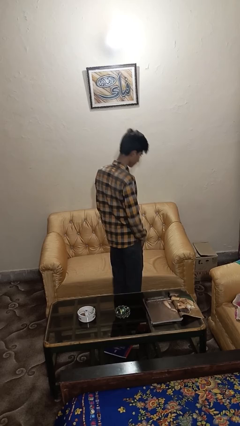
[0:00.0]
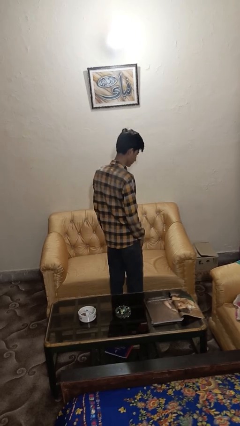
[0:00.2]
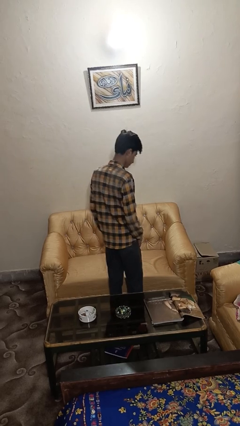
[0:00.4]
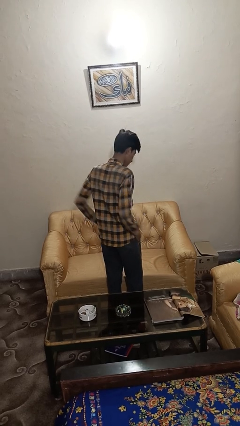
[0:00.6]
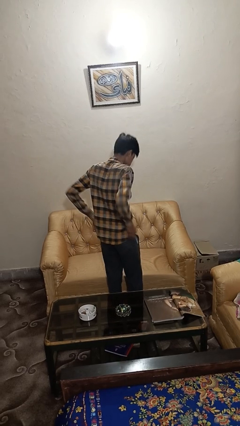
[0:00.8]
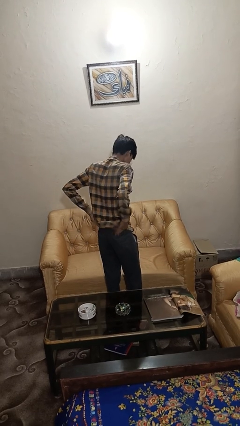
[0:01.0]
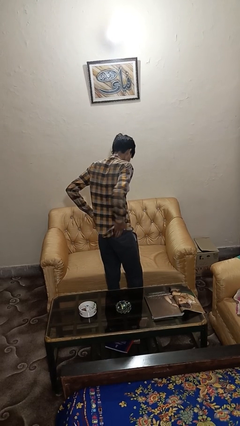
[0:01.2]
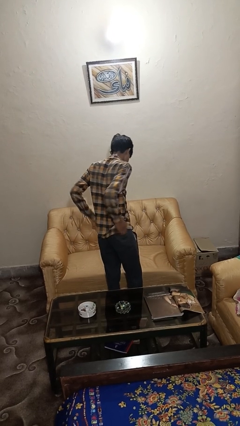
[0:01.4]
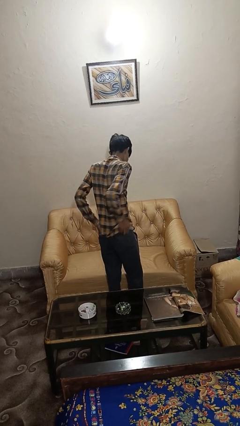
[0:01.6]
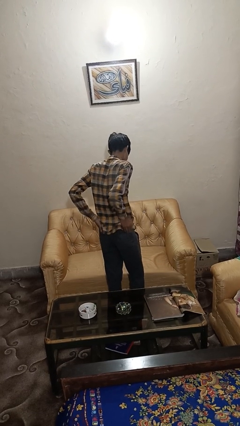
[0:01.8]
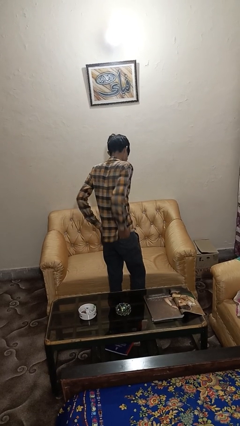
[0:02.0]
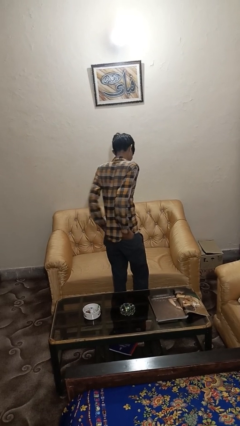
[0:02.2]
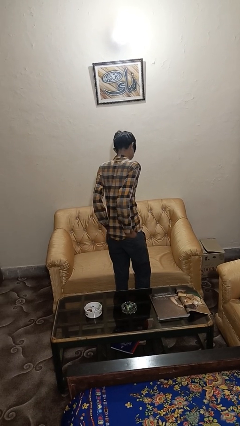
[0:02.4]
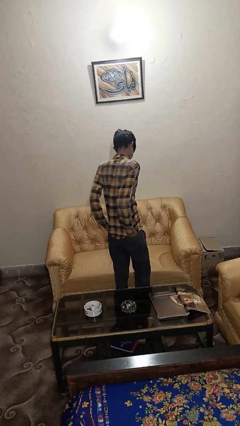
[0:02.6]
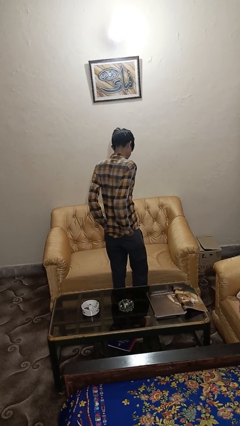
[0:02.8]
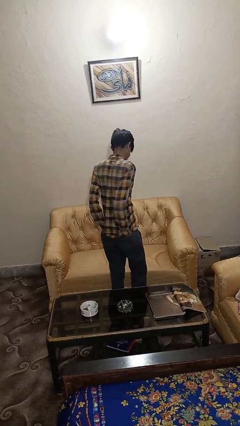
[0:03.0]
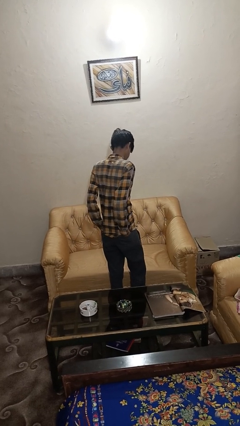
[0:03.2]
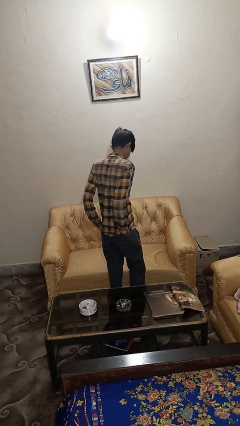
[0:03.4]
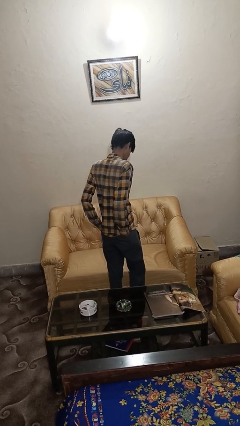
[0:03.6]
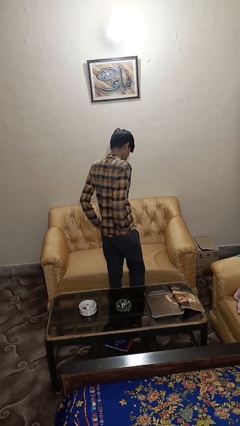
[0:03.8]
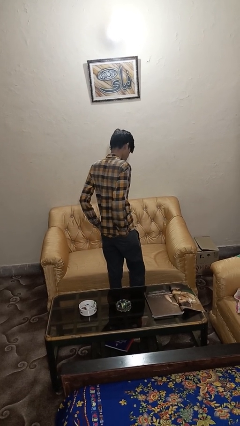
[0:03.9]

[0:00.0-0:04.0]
person puts hands in back pockets

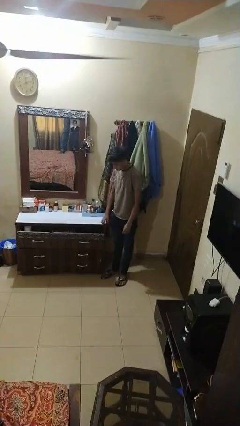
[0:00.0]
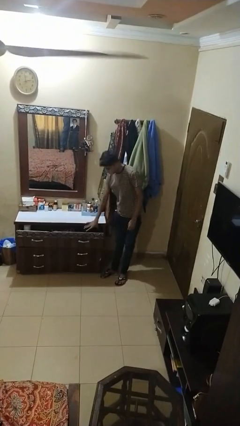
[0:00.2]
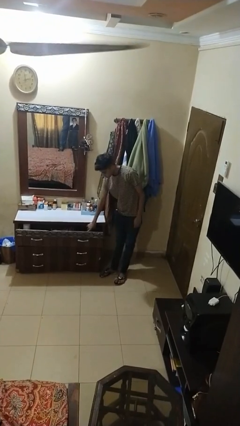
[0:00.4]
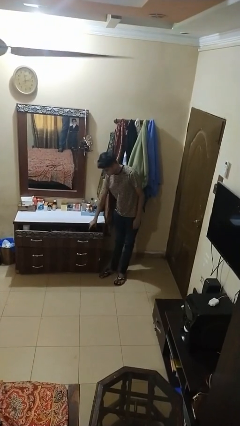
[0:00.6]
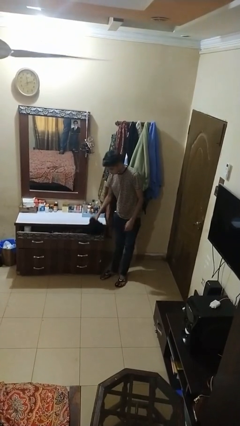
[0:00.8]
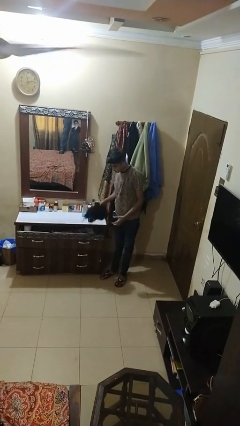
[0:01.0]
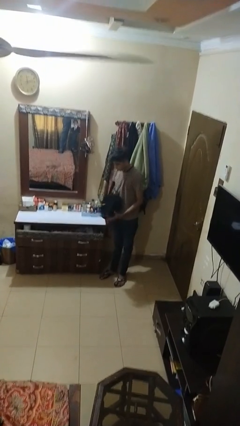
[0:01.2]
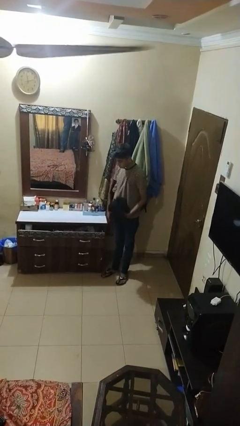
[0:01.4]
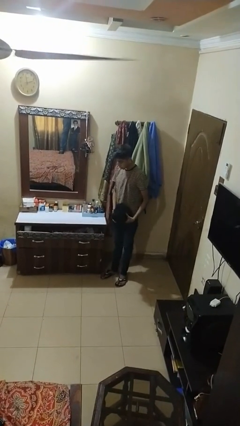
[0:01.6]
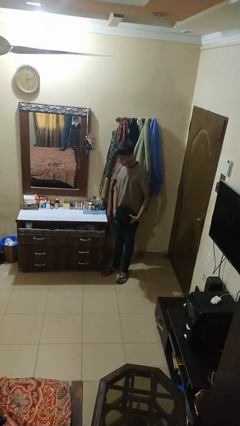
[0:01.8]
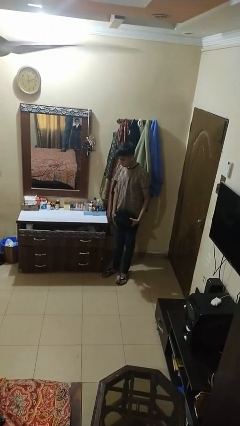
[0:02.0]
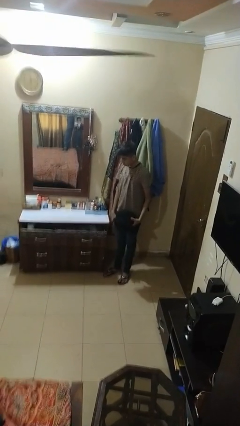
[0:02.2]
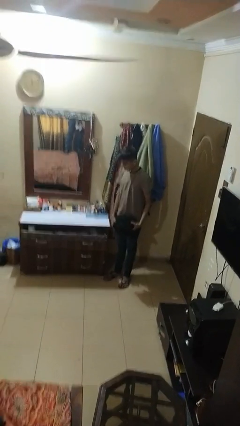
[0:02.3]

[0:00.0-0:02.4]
person takes clothes from dresser

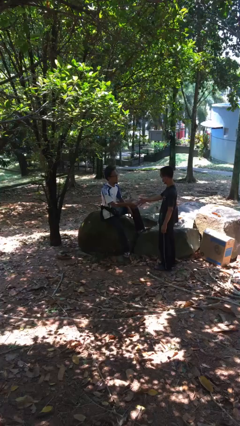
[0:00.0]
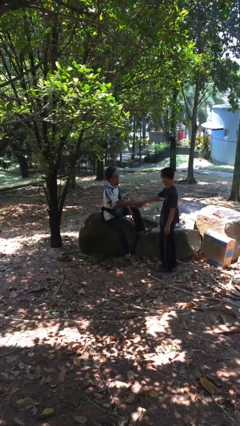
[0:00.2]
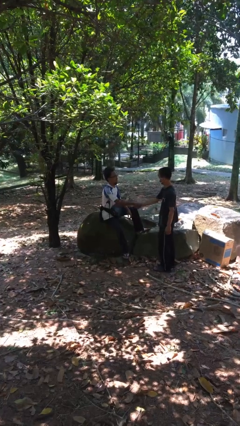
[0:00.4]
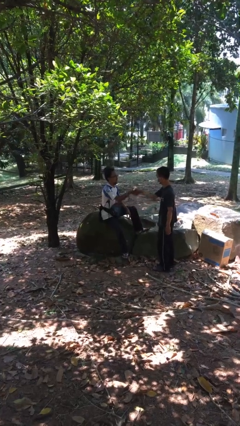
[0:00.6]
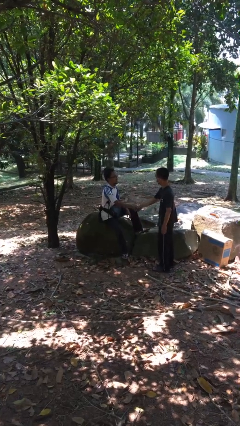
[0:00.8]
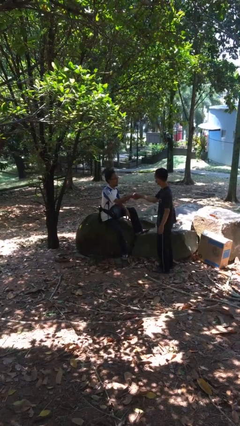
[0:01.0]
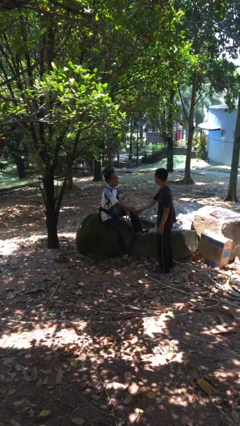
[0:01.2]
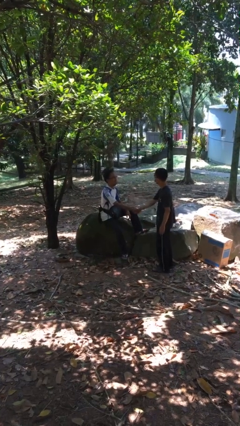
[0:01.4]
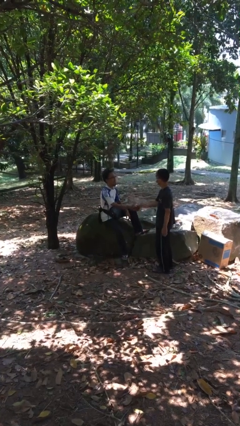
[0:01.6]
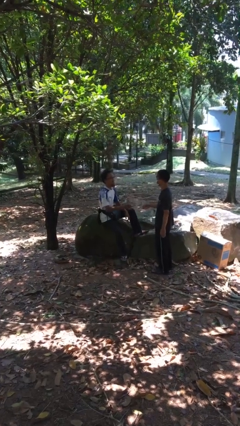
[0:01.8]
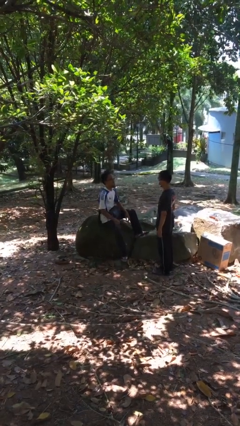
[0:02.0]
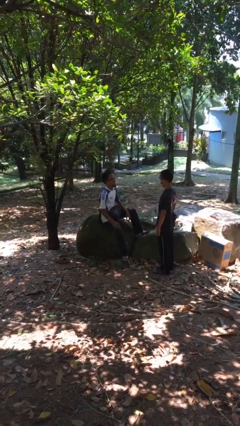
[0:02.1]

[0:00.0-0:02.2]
person shakes hand

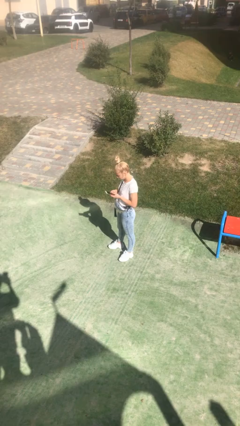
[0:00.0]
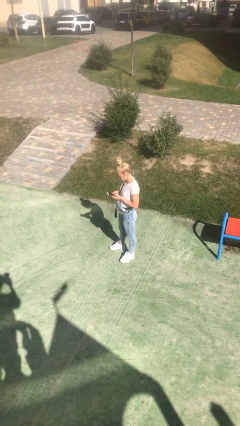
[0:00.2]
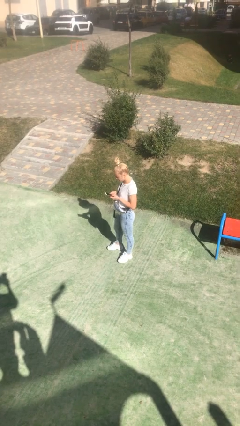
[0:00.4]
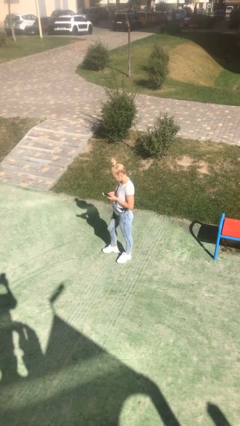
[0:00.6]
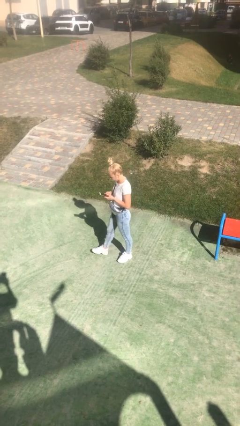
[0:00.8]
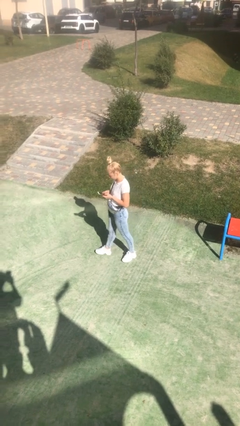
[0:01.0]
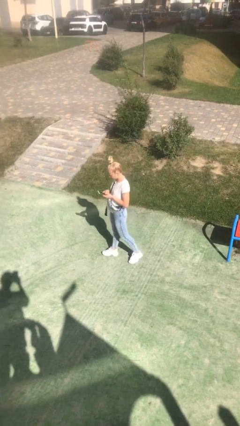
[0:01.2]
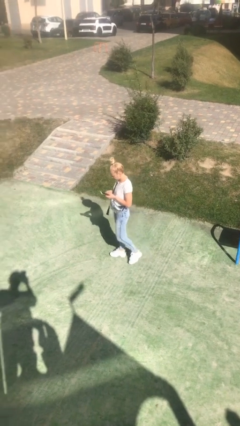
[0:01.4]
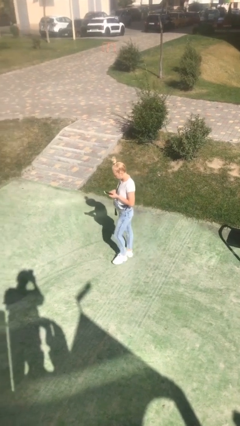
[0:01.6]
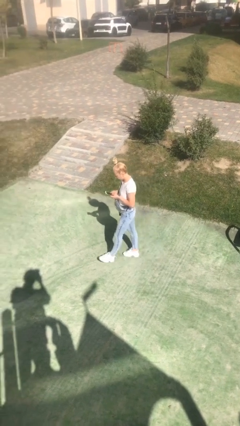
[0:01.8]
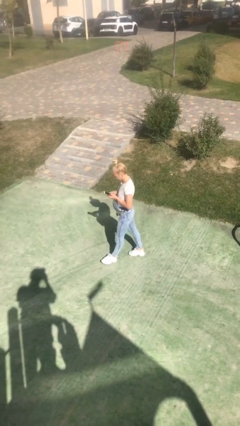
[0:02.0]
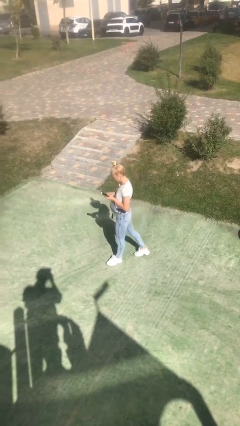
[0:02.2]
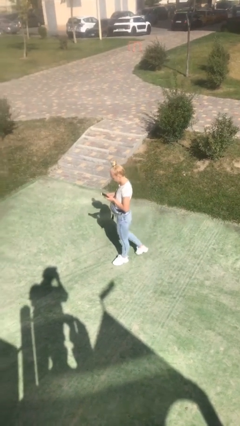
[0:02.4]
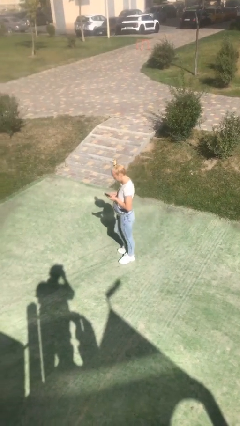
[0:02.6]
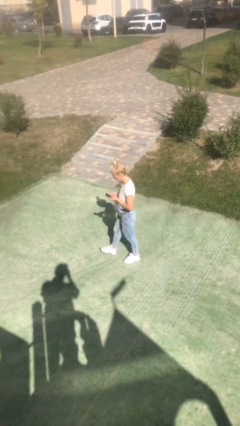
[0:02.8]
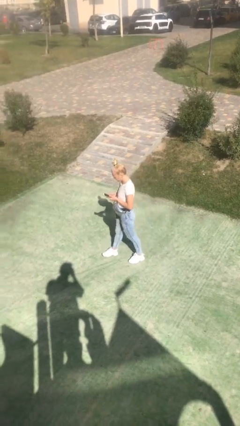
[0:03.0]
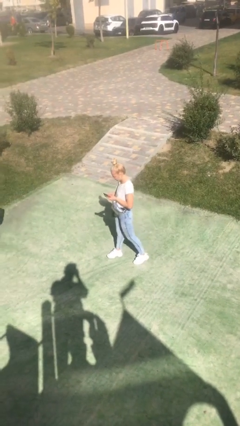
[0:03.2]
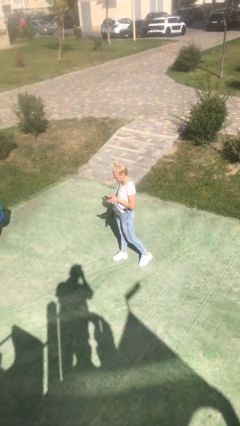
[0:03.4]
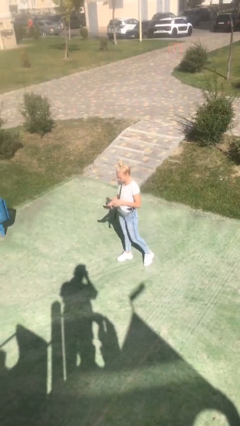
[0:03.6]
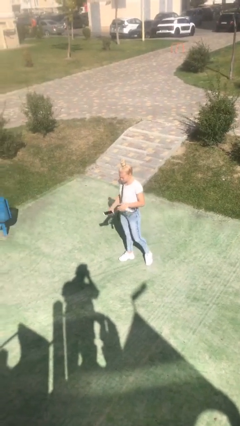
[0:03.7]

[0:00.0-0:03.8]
person texts on phone

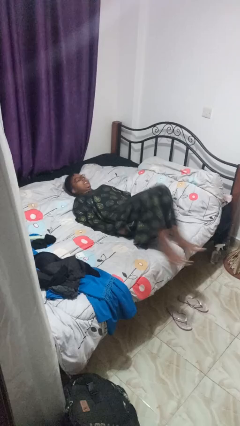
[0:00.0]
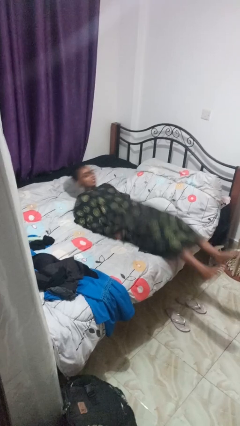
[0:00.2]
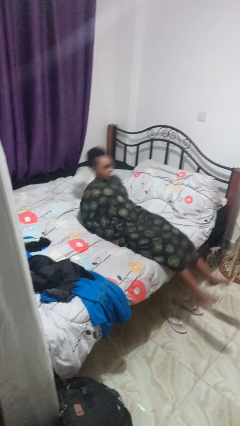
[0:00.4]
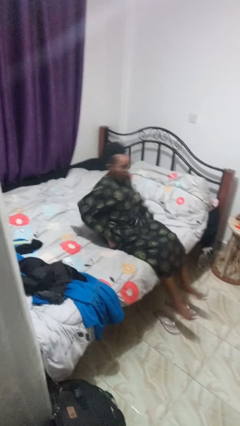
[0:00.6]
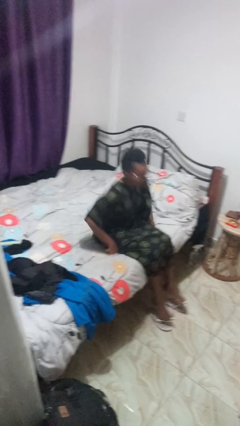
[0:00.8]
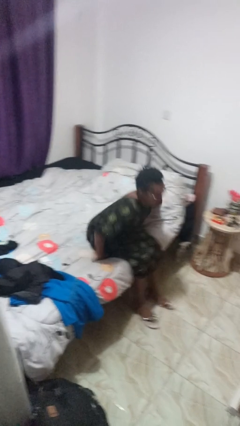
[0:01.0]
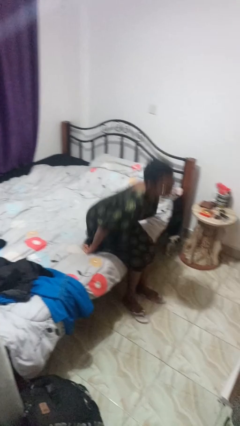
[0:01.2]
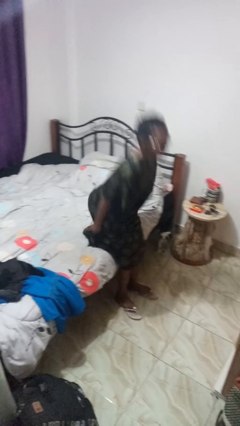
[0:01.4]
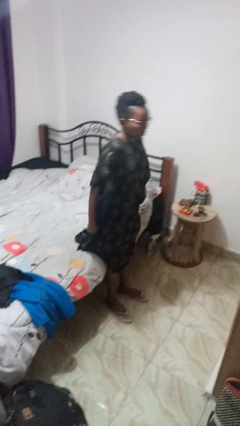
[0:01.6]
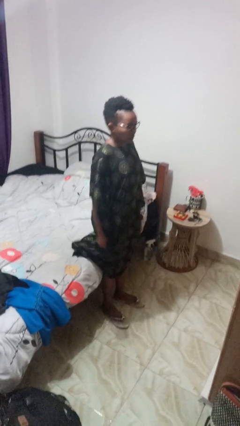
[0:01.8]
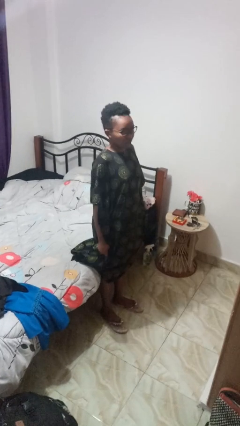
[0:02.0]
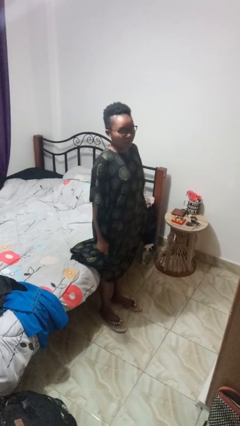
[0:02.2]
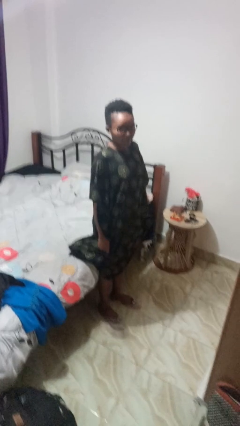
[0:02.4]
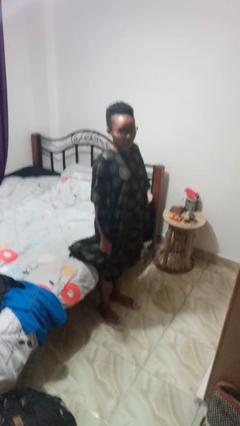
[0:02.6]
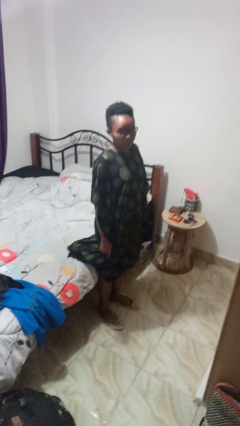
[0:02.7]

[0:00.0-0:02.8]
person stands up

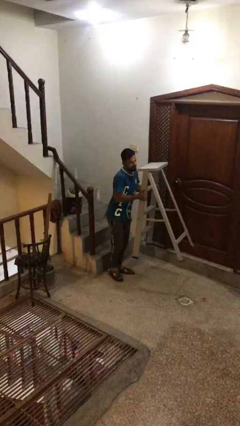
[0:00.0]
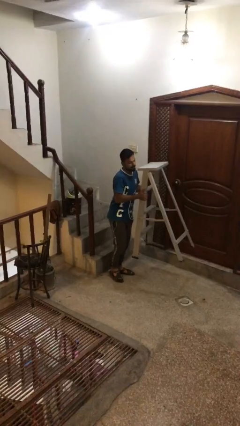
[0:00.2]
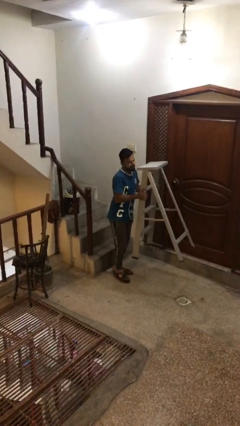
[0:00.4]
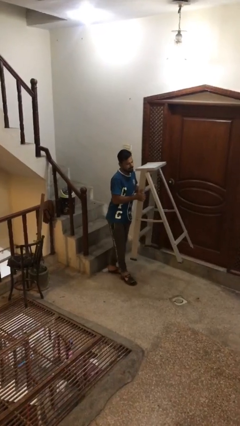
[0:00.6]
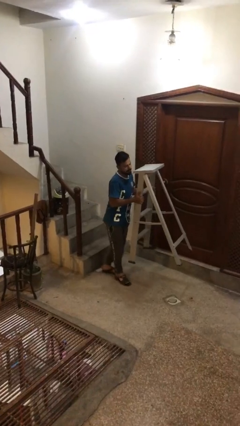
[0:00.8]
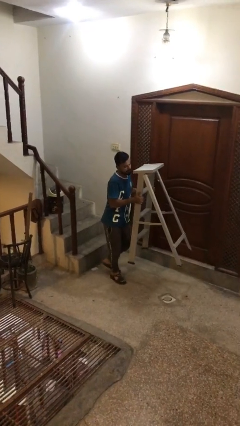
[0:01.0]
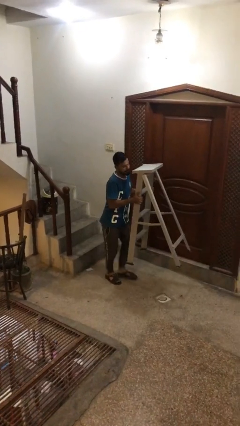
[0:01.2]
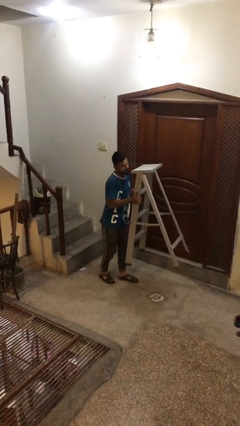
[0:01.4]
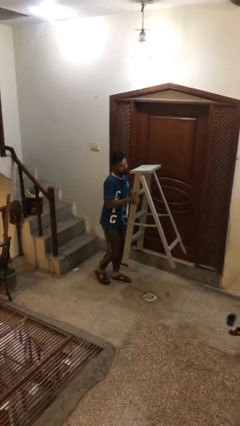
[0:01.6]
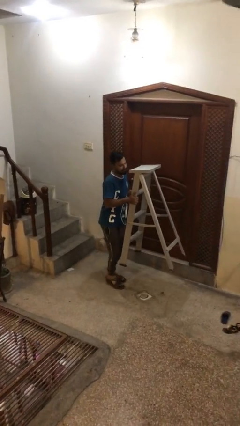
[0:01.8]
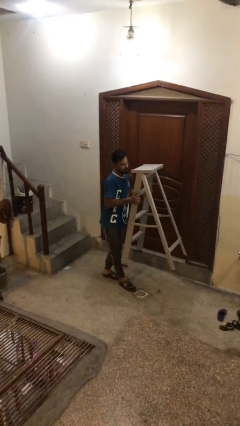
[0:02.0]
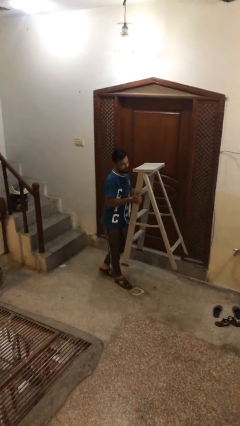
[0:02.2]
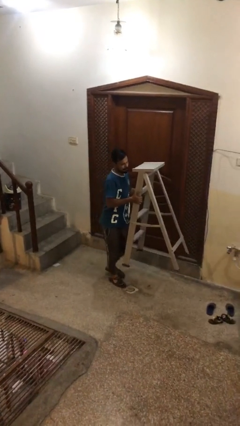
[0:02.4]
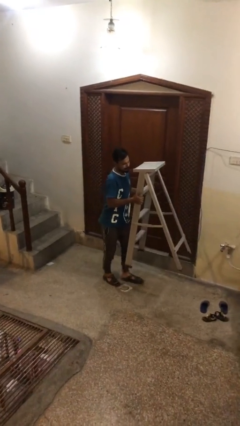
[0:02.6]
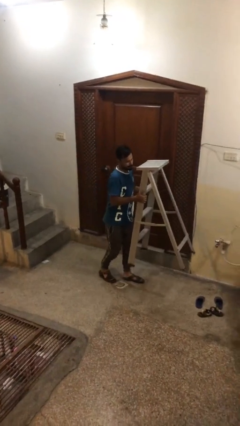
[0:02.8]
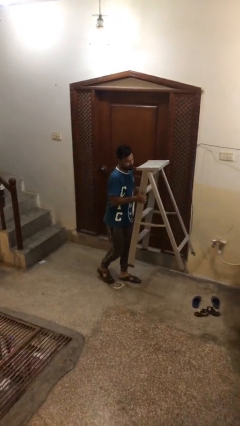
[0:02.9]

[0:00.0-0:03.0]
person carries heavy object
